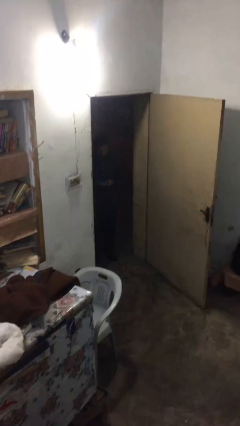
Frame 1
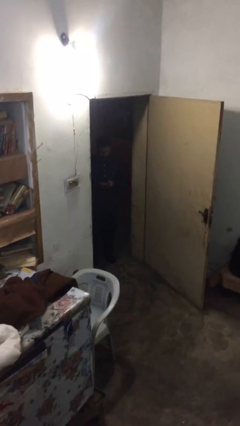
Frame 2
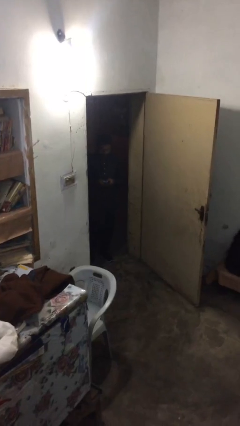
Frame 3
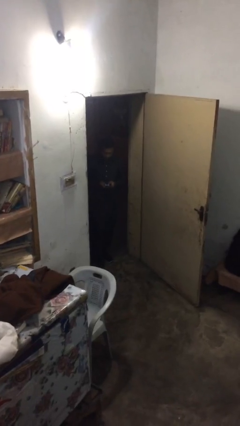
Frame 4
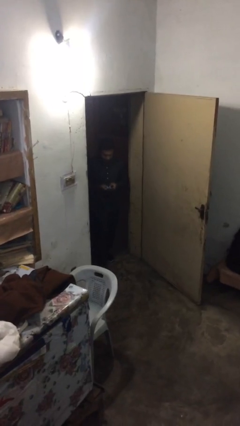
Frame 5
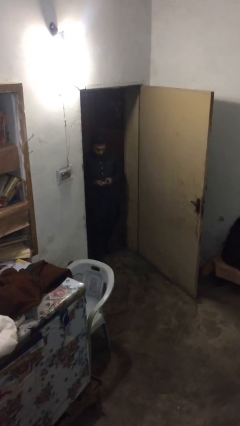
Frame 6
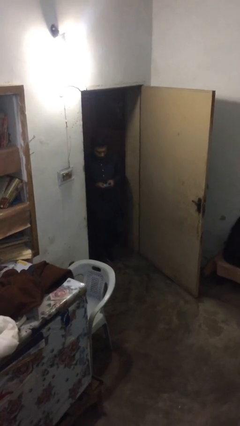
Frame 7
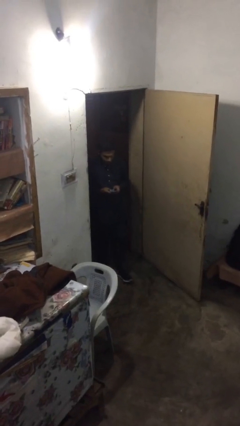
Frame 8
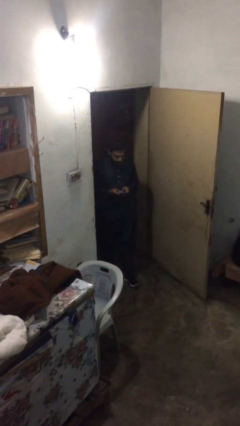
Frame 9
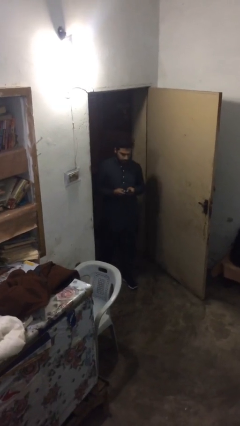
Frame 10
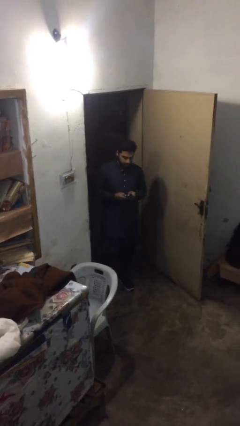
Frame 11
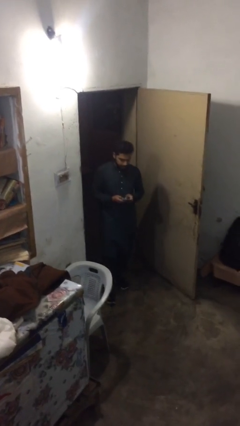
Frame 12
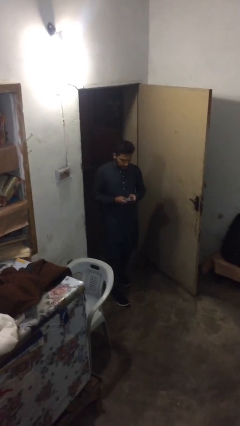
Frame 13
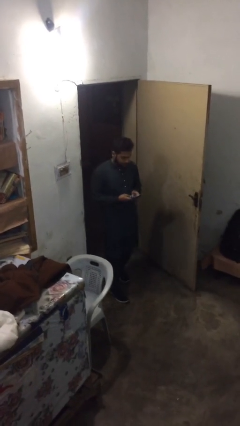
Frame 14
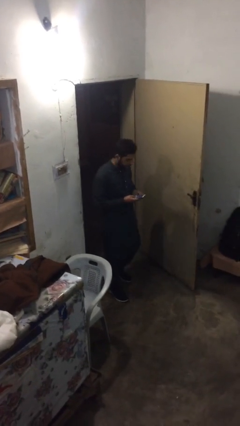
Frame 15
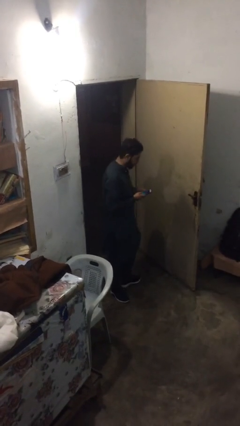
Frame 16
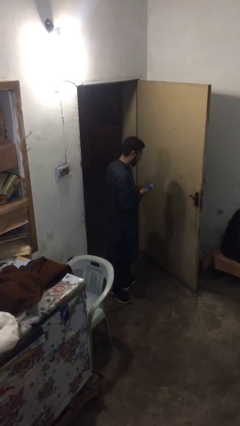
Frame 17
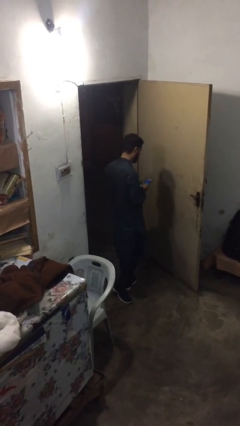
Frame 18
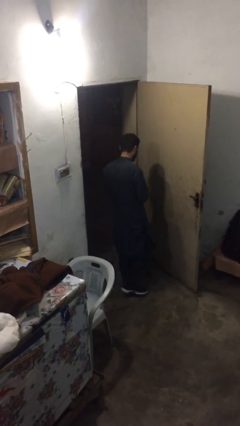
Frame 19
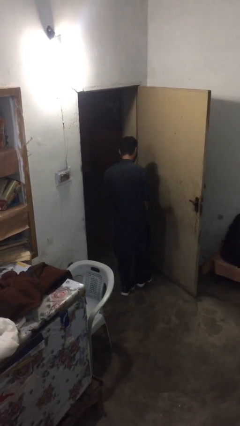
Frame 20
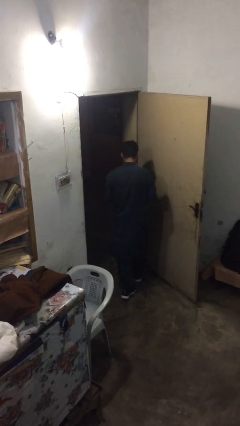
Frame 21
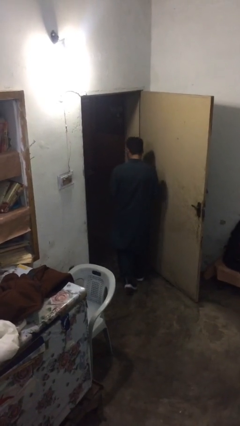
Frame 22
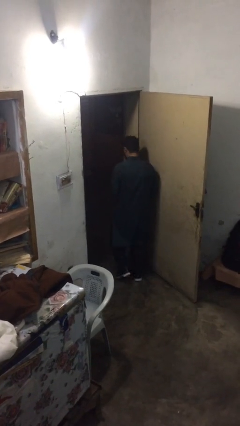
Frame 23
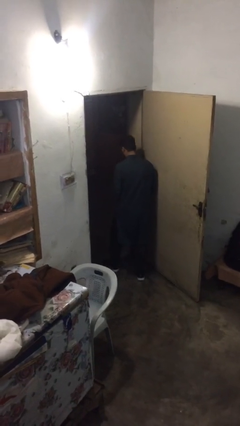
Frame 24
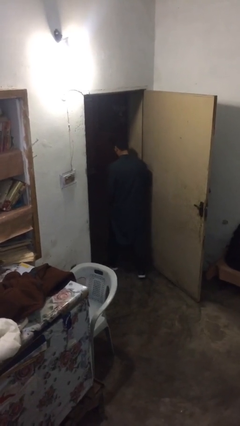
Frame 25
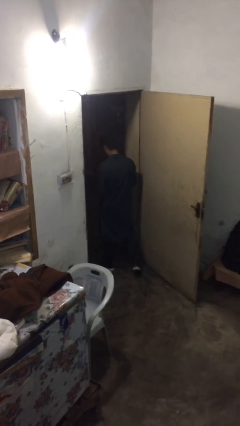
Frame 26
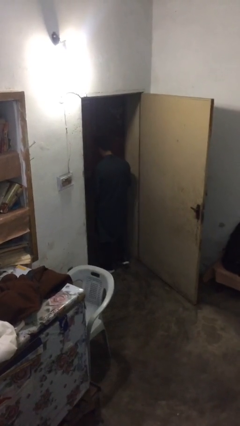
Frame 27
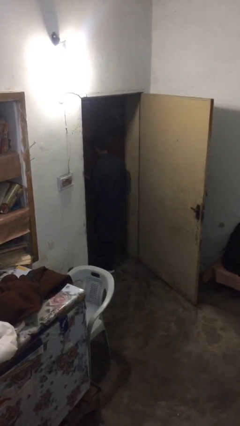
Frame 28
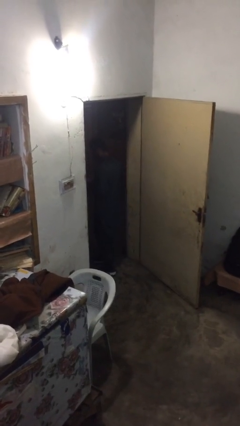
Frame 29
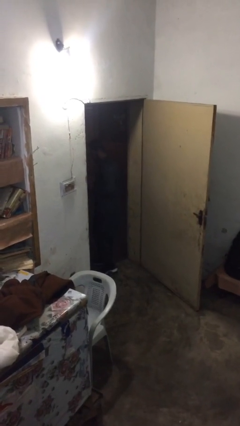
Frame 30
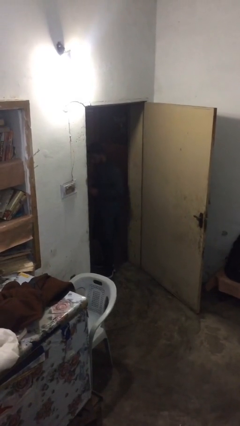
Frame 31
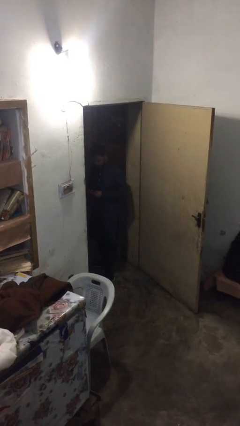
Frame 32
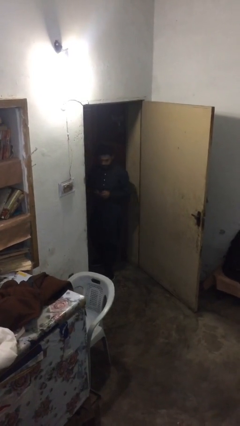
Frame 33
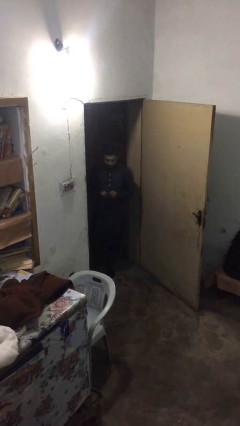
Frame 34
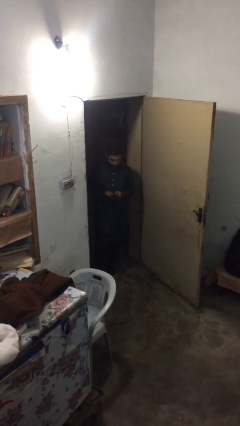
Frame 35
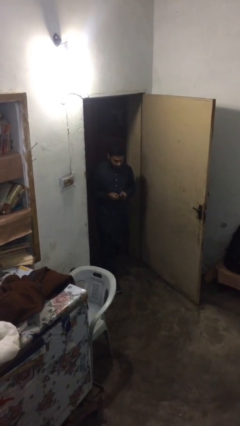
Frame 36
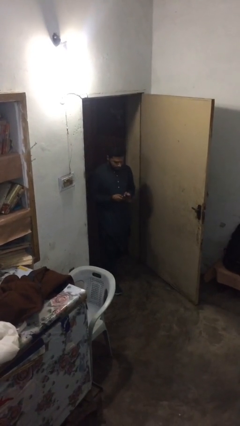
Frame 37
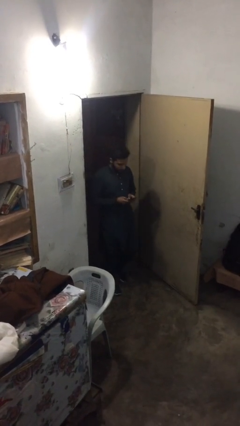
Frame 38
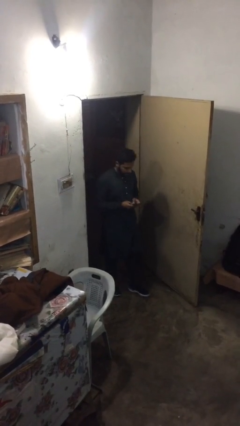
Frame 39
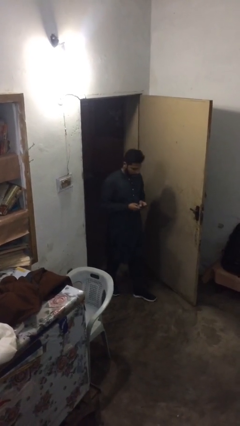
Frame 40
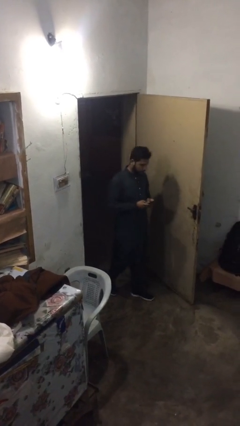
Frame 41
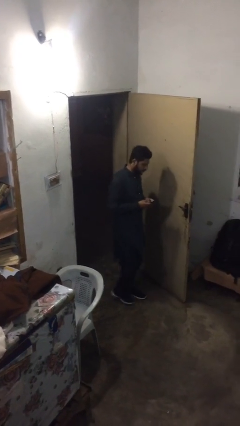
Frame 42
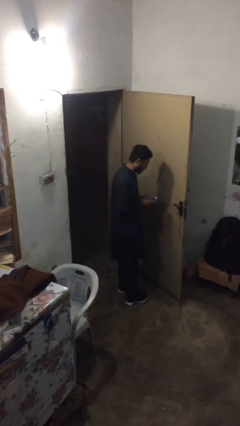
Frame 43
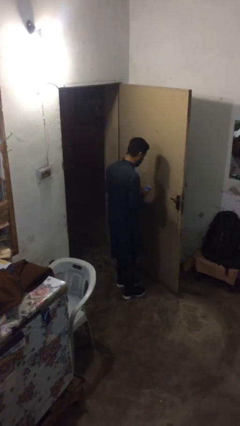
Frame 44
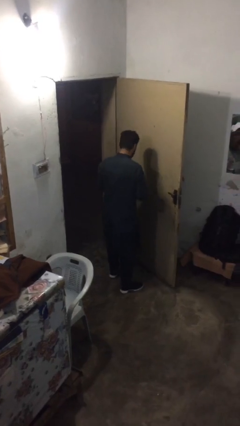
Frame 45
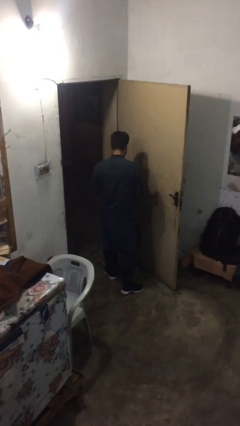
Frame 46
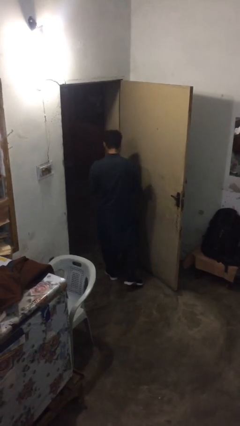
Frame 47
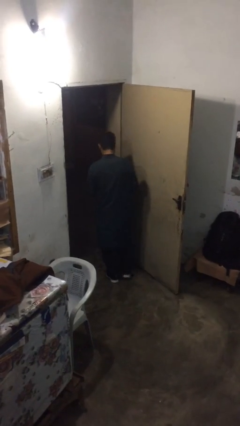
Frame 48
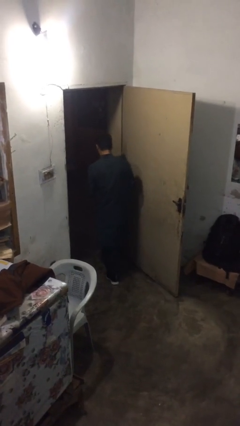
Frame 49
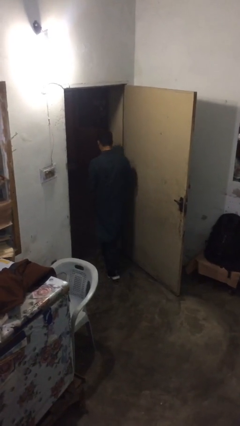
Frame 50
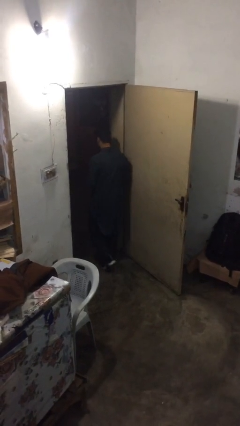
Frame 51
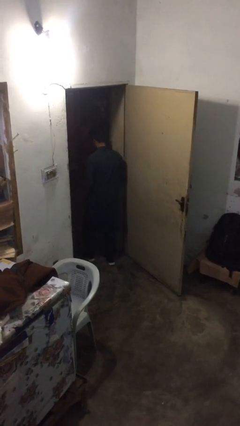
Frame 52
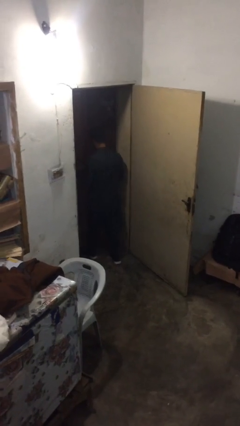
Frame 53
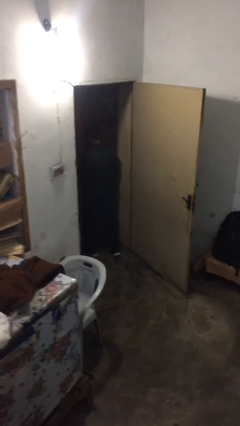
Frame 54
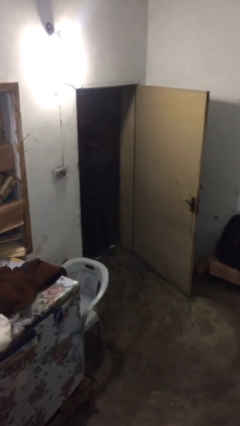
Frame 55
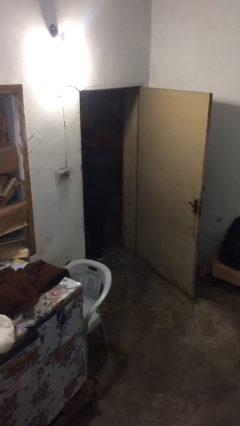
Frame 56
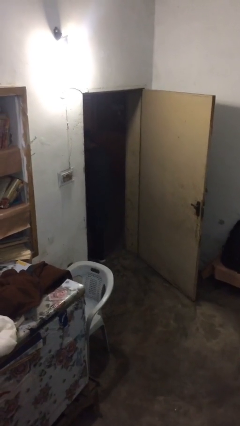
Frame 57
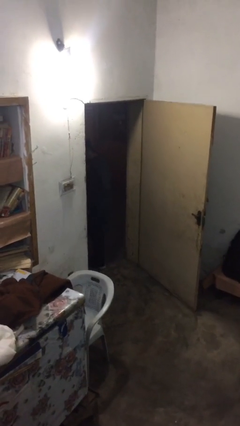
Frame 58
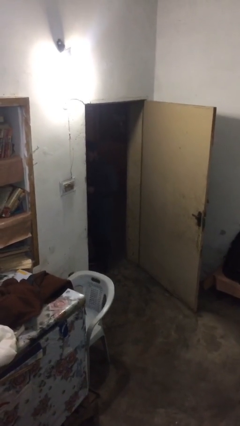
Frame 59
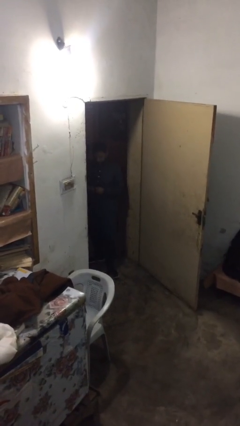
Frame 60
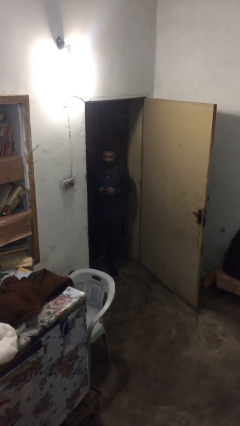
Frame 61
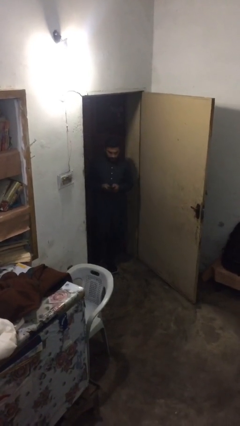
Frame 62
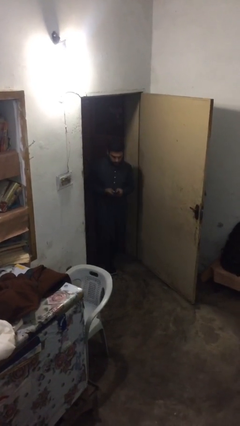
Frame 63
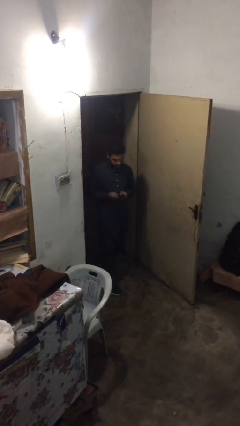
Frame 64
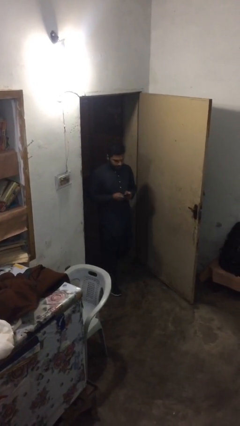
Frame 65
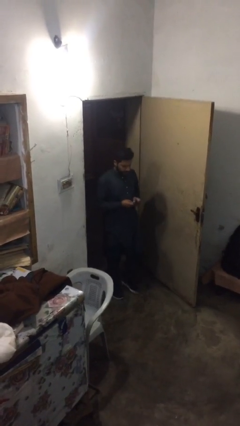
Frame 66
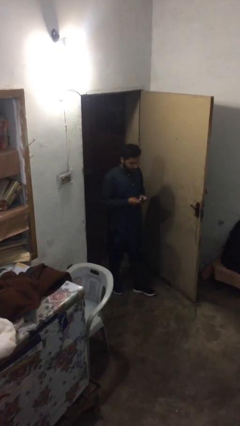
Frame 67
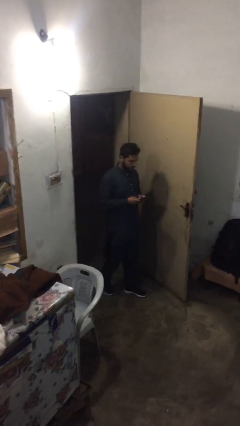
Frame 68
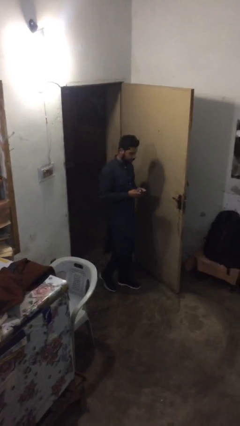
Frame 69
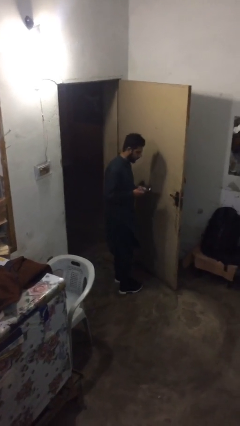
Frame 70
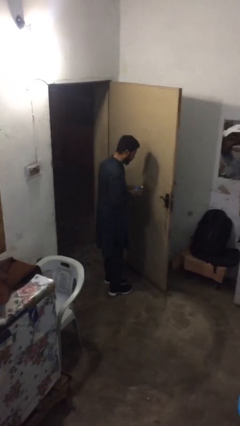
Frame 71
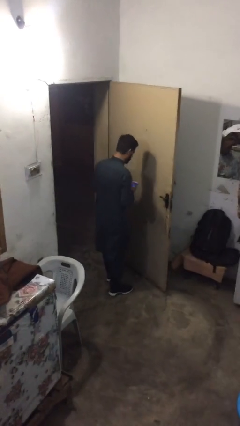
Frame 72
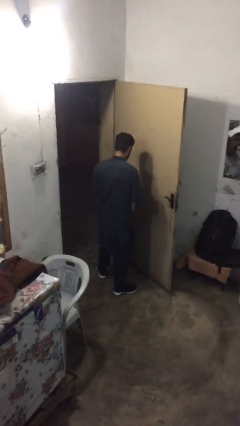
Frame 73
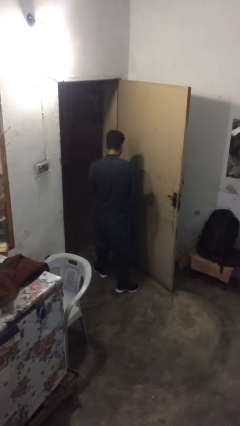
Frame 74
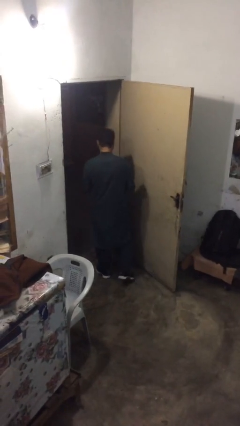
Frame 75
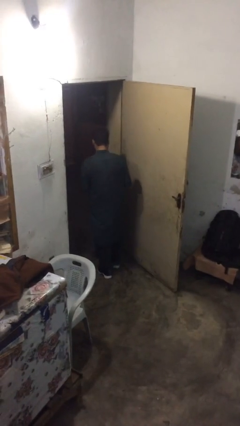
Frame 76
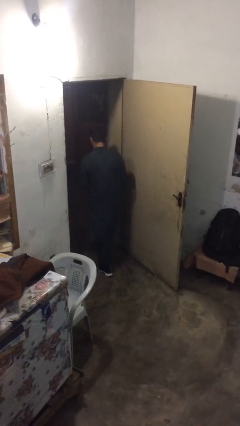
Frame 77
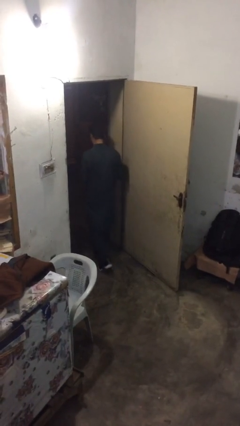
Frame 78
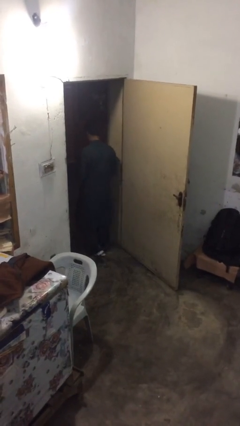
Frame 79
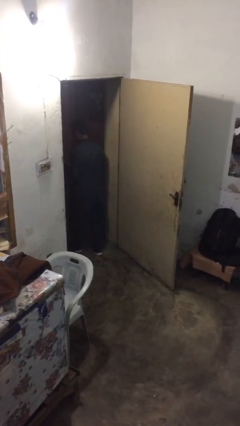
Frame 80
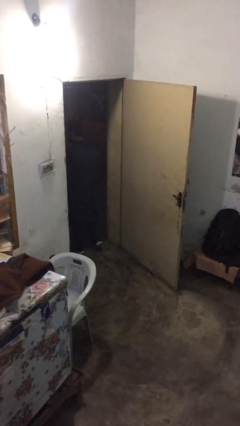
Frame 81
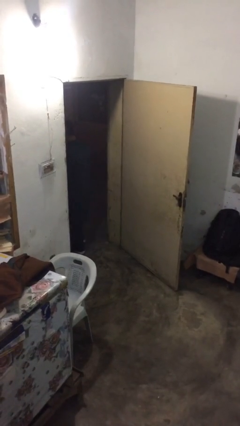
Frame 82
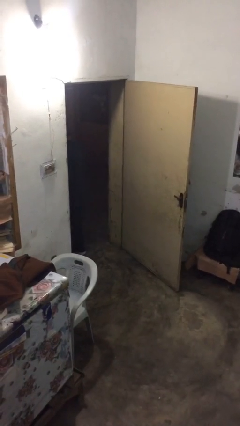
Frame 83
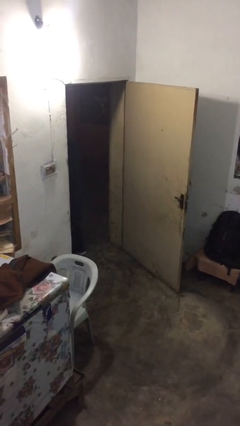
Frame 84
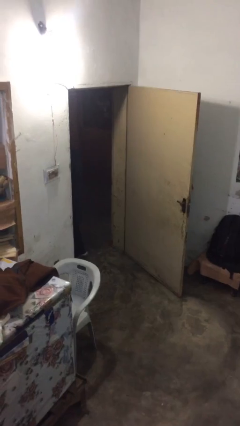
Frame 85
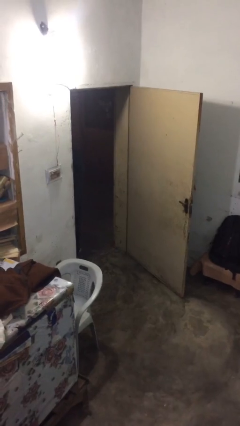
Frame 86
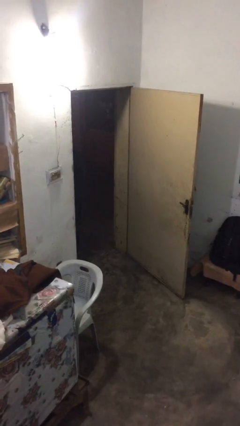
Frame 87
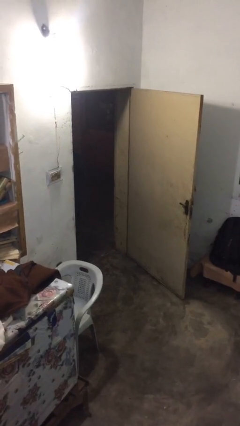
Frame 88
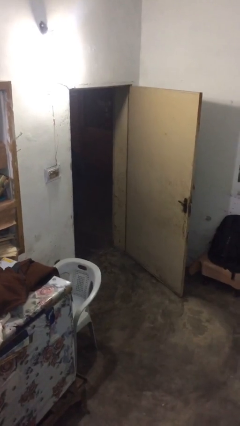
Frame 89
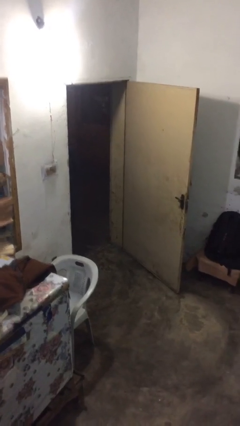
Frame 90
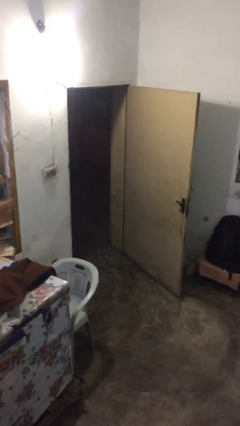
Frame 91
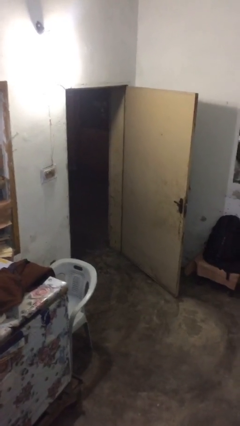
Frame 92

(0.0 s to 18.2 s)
person texts on phone
